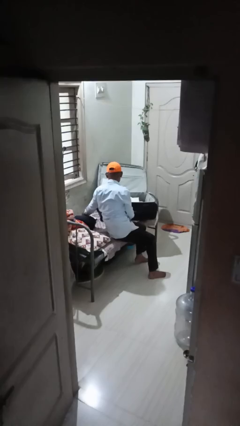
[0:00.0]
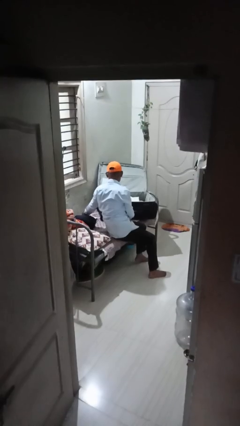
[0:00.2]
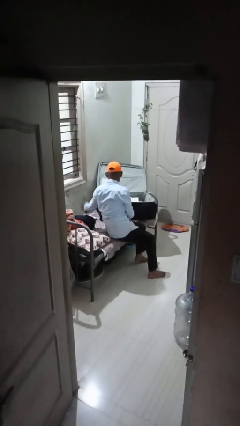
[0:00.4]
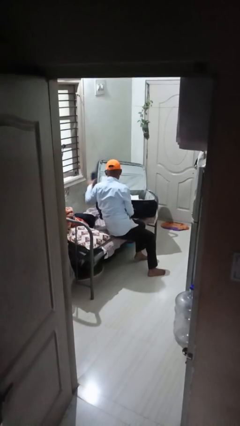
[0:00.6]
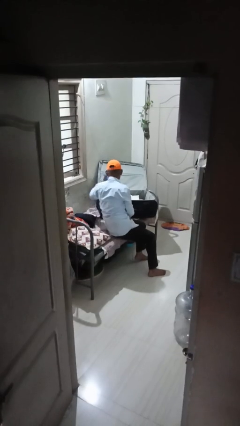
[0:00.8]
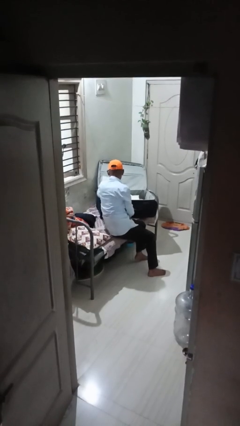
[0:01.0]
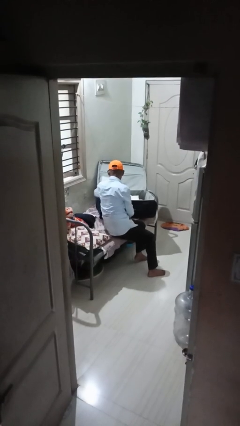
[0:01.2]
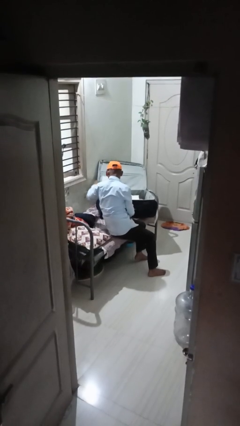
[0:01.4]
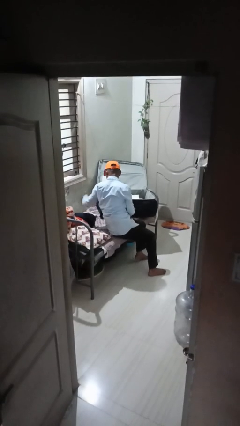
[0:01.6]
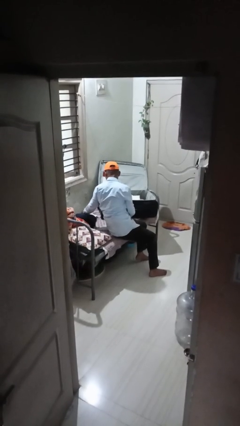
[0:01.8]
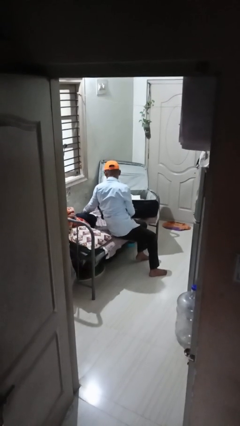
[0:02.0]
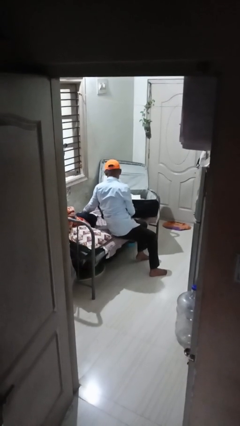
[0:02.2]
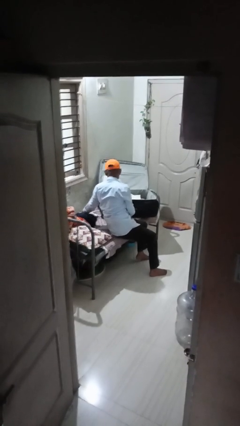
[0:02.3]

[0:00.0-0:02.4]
person loads clothes into suitcase

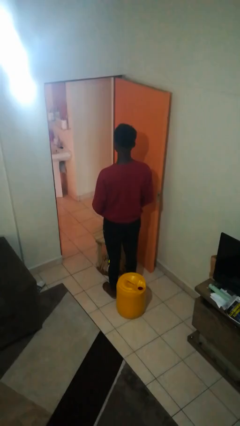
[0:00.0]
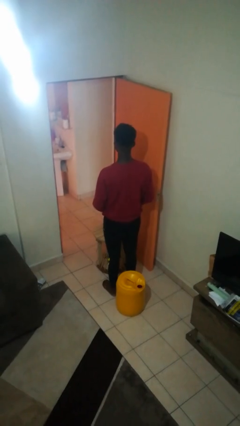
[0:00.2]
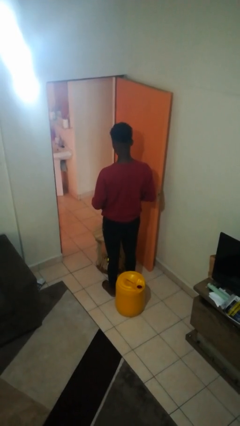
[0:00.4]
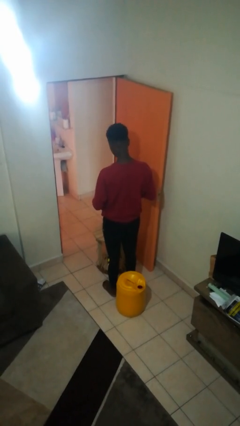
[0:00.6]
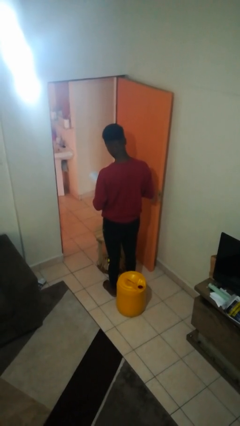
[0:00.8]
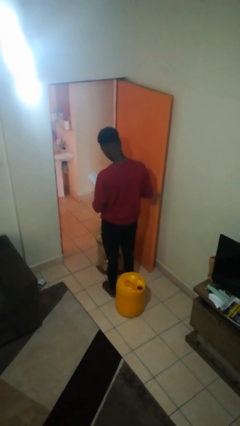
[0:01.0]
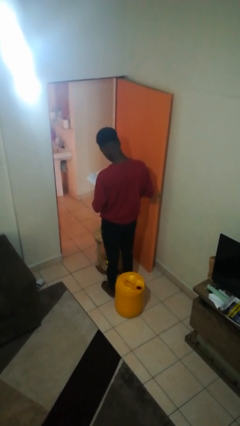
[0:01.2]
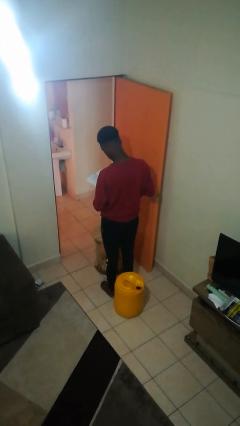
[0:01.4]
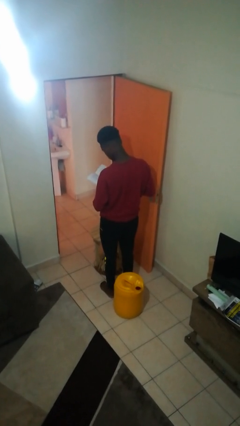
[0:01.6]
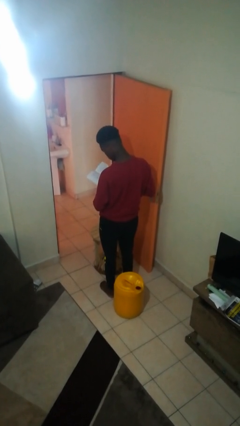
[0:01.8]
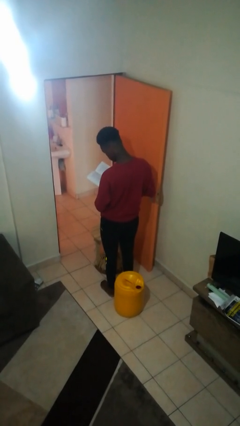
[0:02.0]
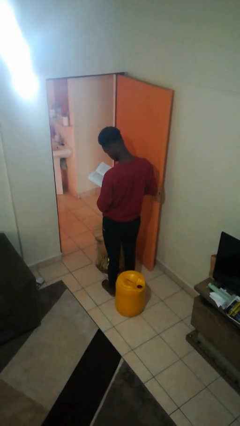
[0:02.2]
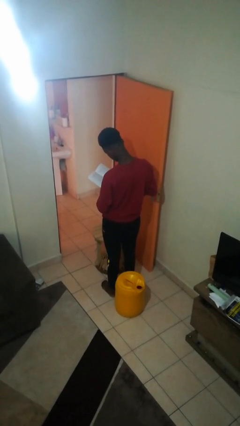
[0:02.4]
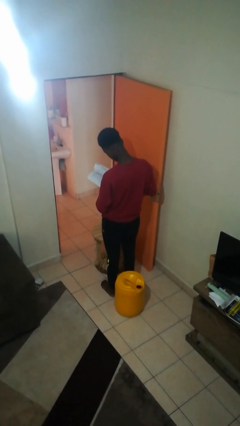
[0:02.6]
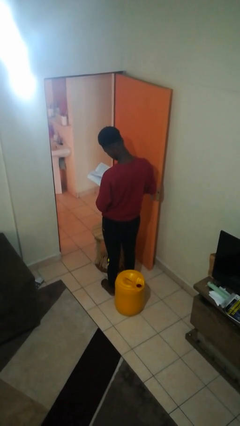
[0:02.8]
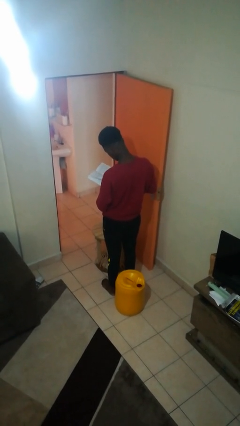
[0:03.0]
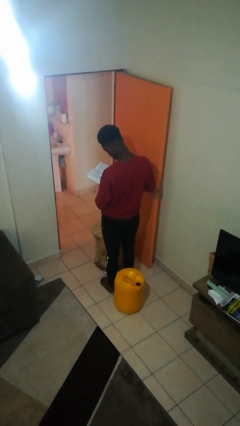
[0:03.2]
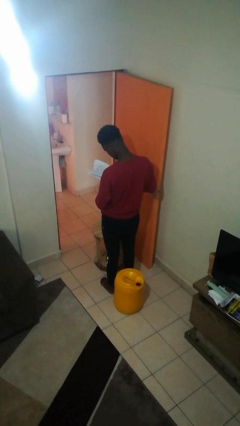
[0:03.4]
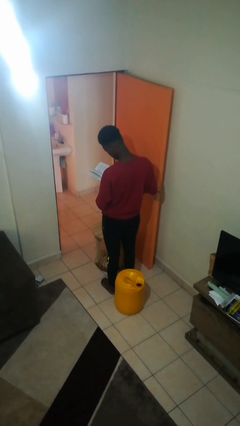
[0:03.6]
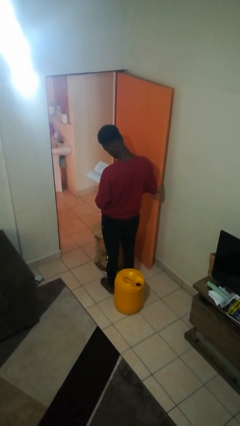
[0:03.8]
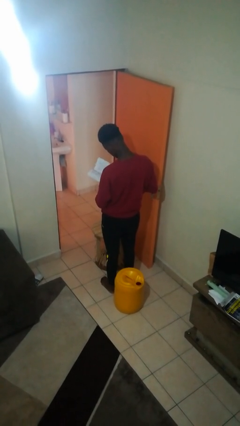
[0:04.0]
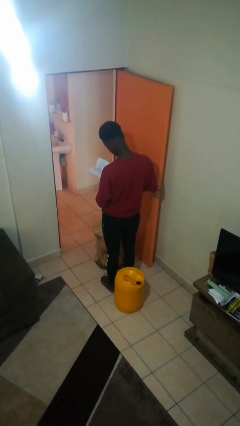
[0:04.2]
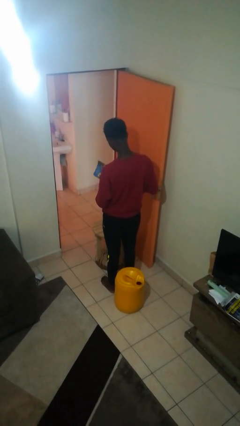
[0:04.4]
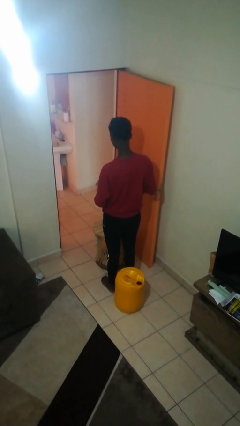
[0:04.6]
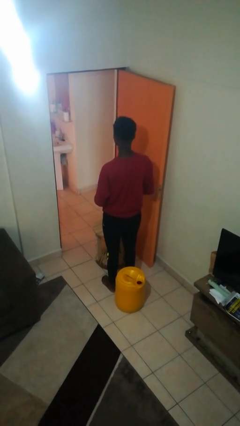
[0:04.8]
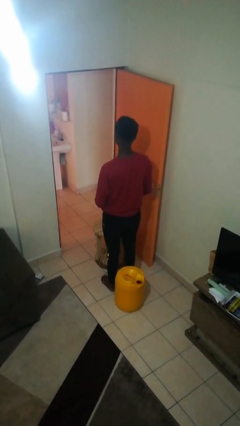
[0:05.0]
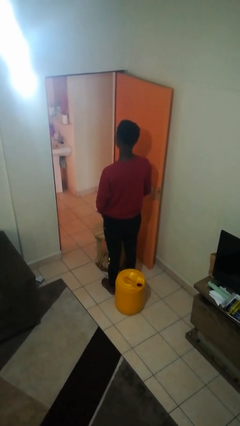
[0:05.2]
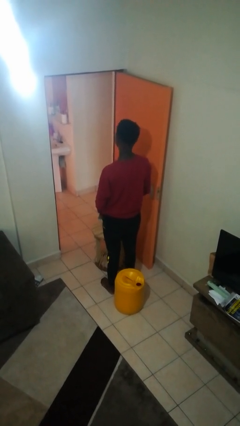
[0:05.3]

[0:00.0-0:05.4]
person reads book

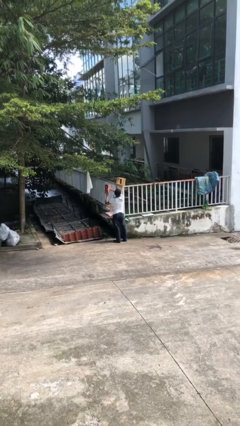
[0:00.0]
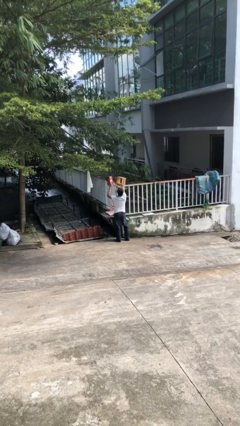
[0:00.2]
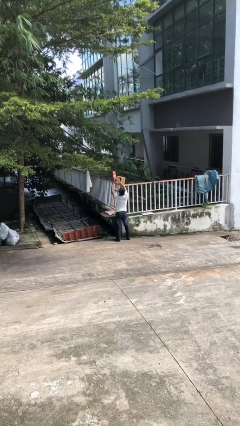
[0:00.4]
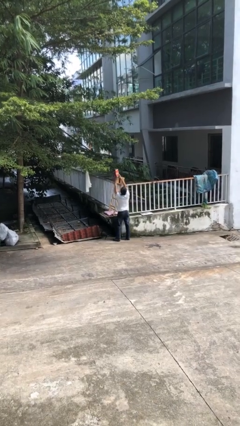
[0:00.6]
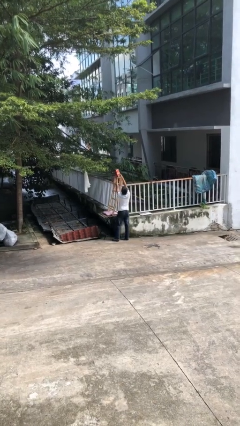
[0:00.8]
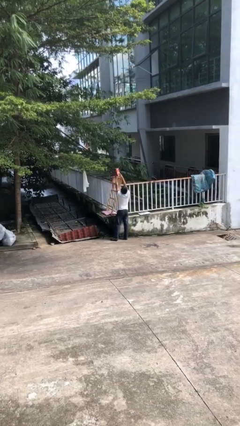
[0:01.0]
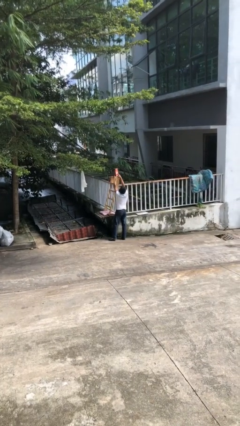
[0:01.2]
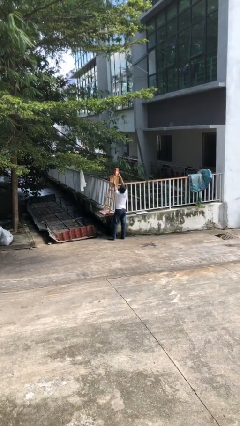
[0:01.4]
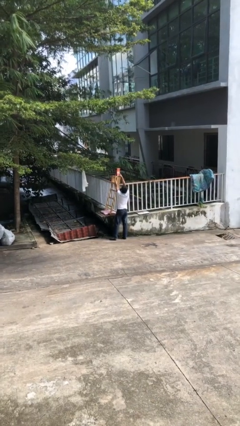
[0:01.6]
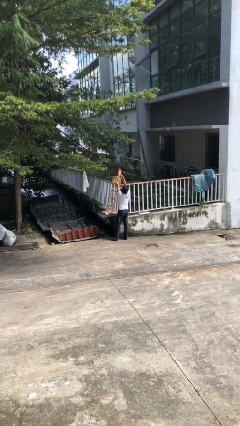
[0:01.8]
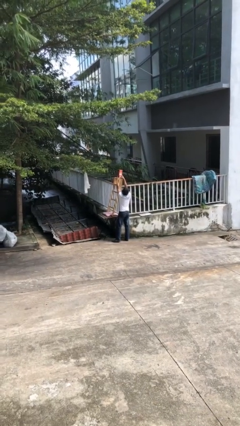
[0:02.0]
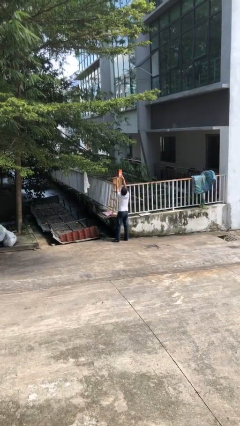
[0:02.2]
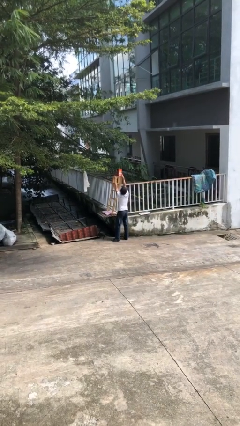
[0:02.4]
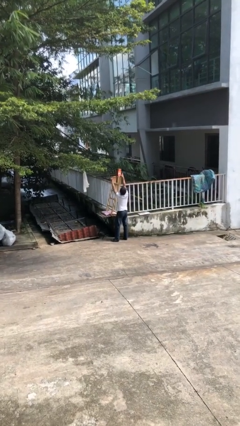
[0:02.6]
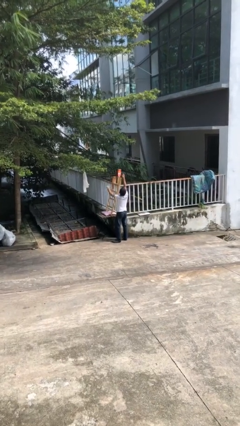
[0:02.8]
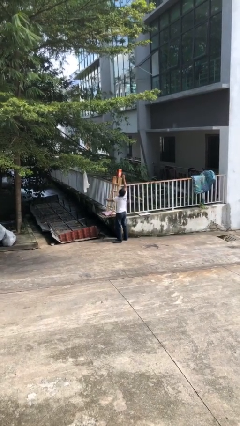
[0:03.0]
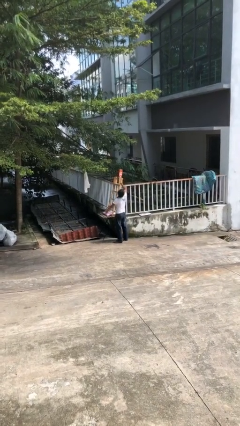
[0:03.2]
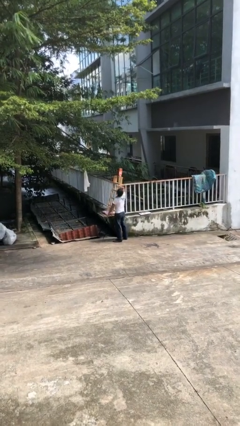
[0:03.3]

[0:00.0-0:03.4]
person puts down object on shelf

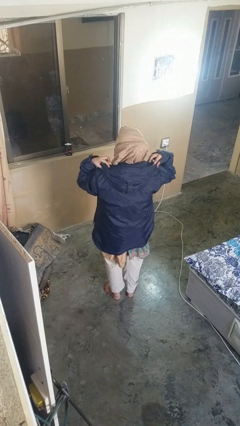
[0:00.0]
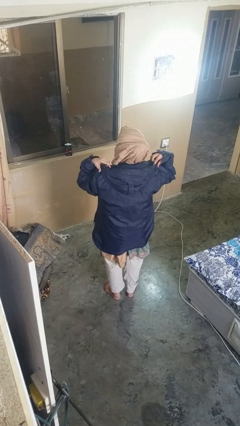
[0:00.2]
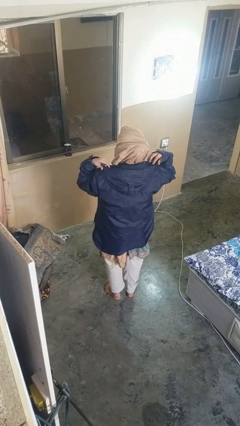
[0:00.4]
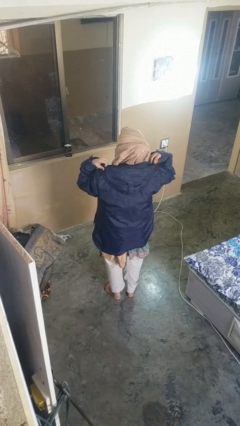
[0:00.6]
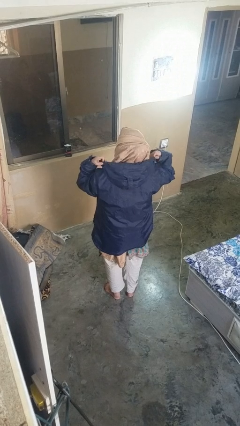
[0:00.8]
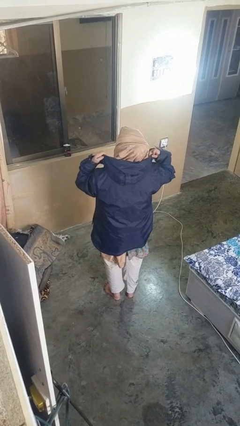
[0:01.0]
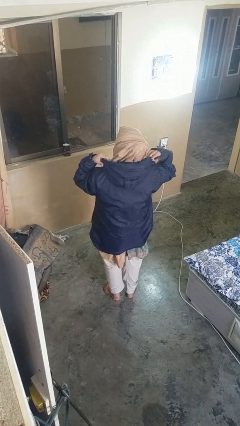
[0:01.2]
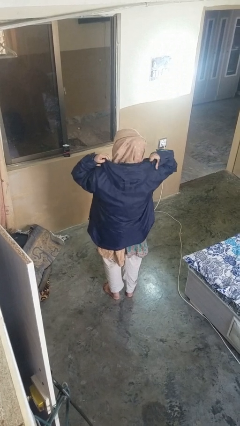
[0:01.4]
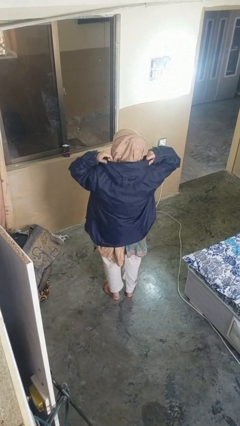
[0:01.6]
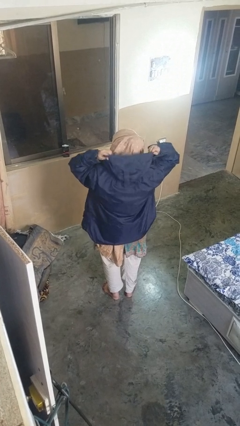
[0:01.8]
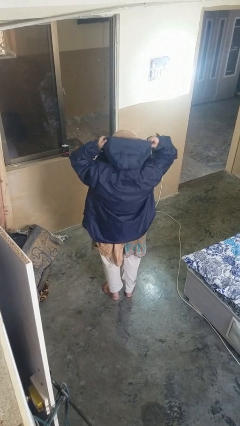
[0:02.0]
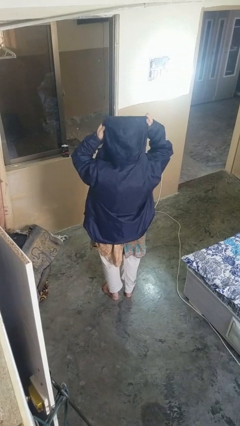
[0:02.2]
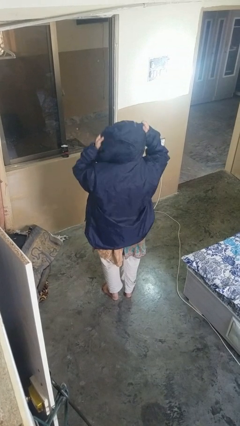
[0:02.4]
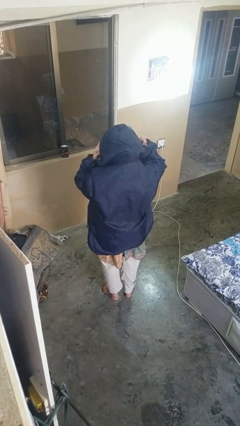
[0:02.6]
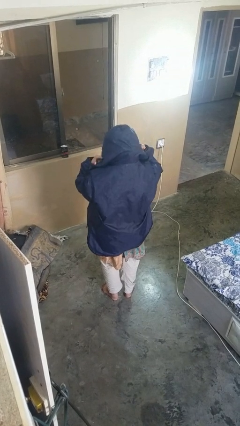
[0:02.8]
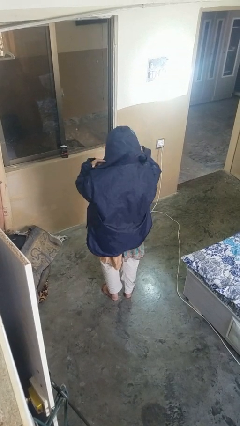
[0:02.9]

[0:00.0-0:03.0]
person puts on hat

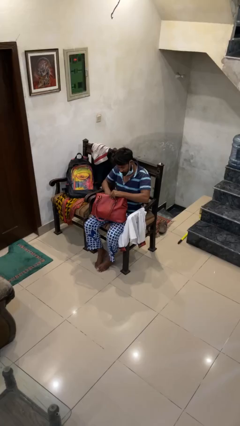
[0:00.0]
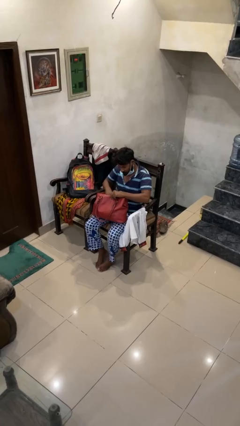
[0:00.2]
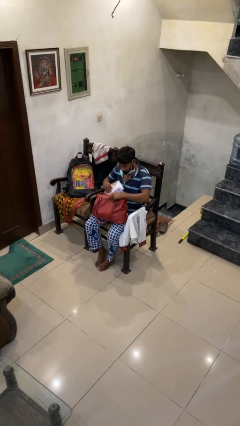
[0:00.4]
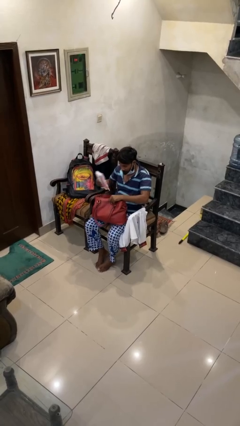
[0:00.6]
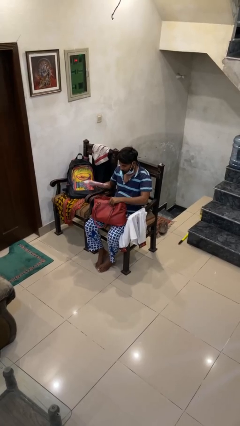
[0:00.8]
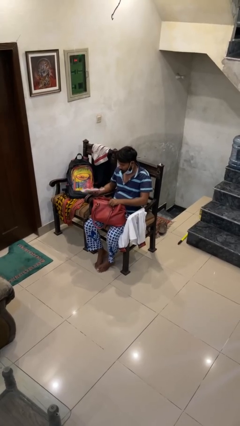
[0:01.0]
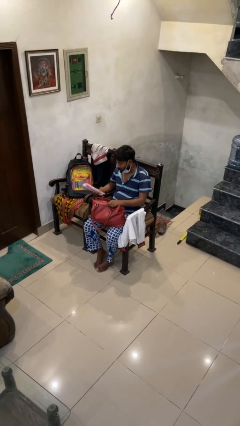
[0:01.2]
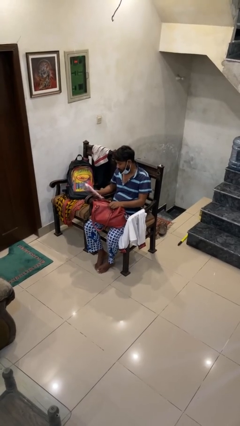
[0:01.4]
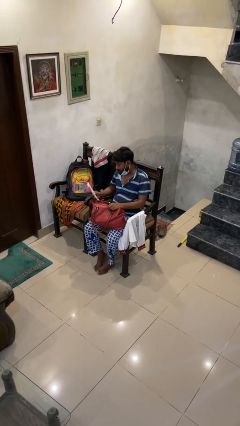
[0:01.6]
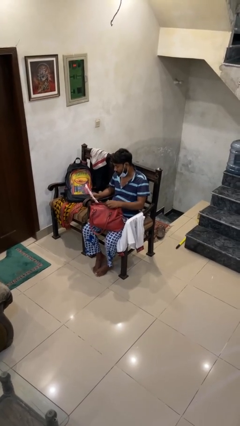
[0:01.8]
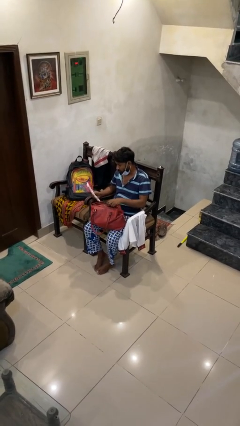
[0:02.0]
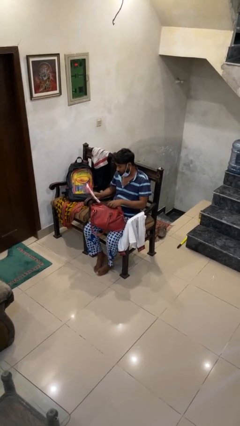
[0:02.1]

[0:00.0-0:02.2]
person takes object from purse

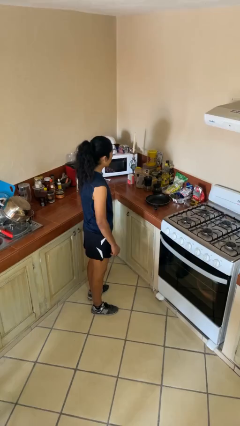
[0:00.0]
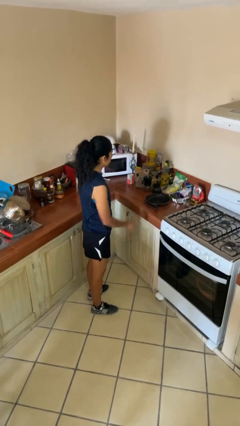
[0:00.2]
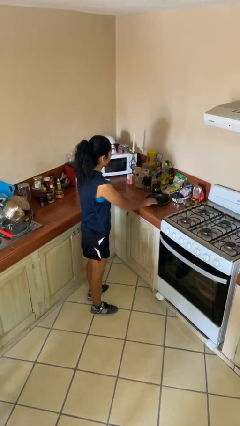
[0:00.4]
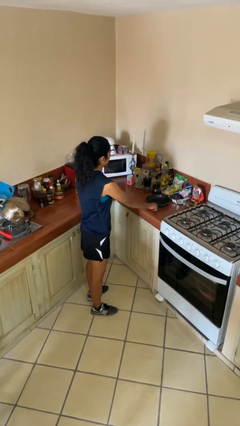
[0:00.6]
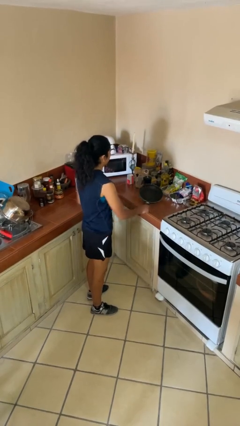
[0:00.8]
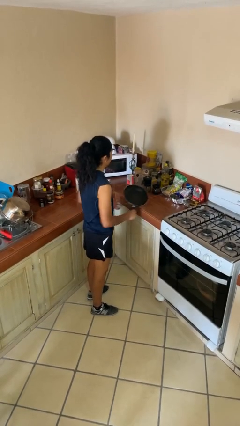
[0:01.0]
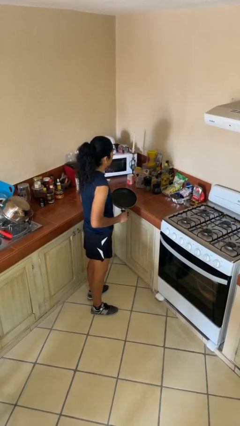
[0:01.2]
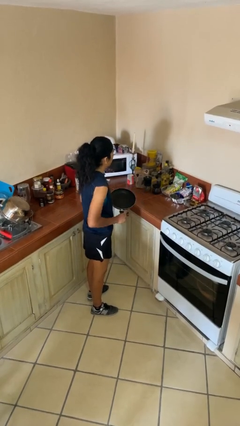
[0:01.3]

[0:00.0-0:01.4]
person picks up object from countertop
